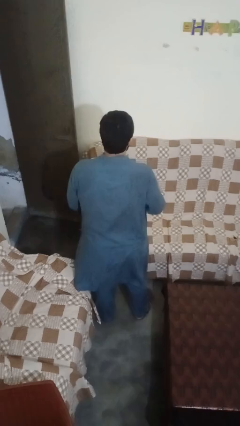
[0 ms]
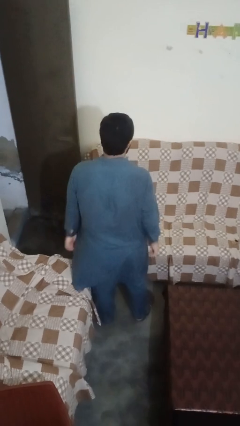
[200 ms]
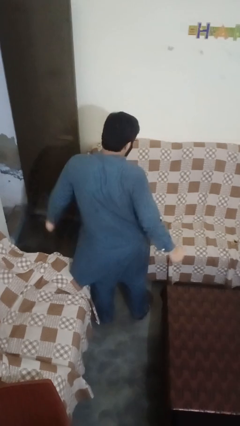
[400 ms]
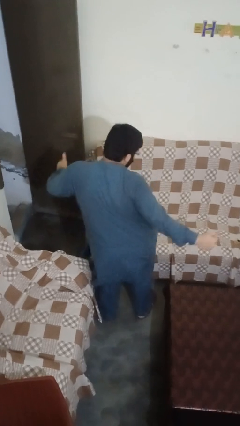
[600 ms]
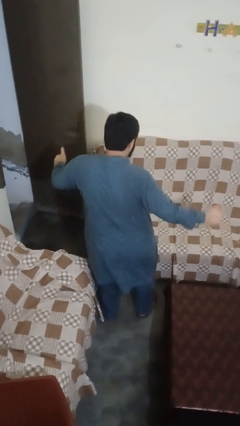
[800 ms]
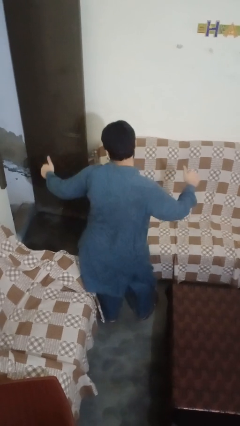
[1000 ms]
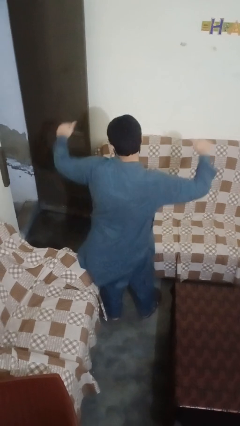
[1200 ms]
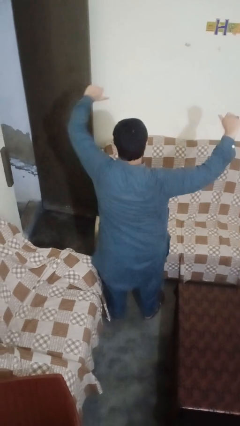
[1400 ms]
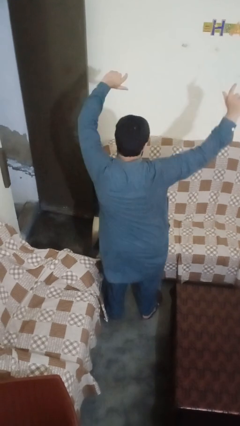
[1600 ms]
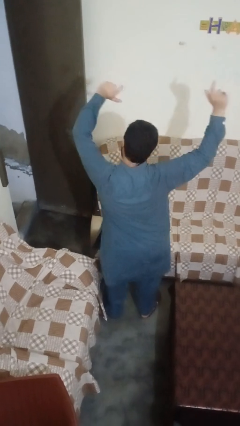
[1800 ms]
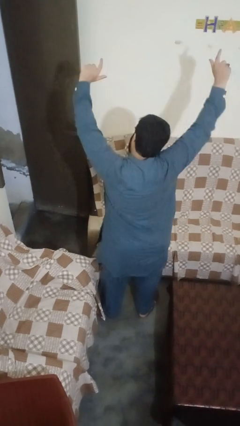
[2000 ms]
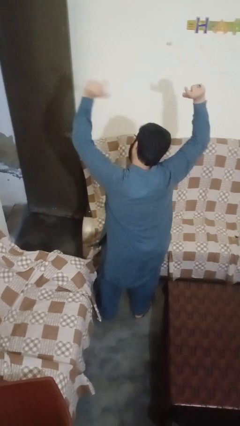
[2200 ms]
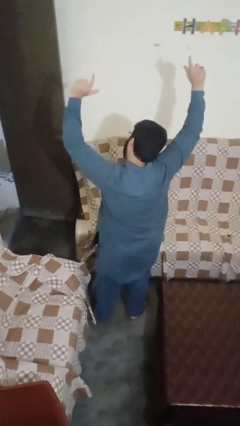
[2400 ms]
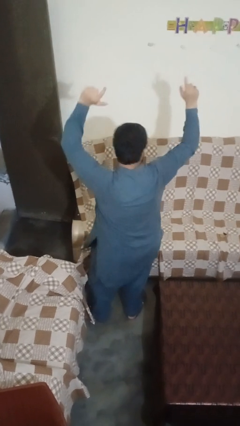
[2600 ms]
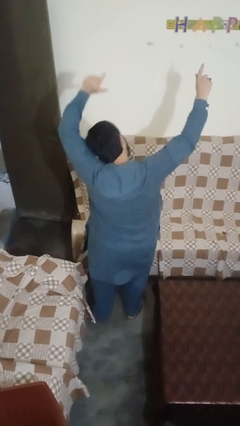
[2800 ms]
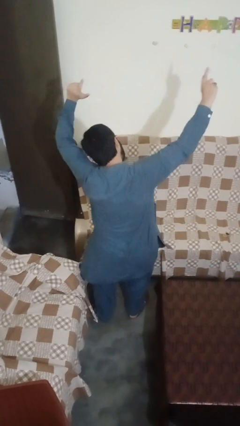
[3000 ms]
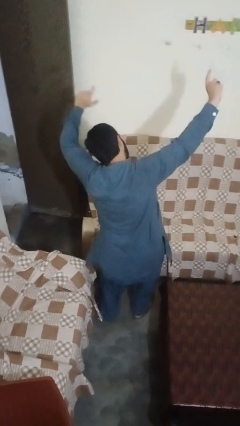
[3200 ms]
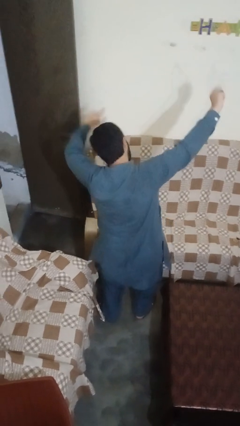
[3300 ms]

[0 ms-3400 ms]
person dances in place

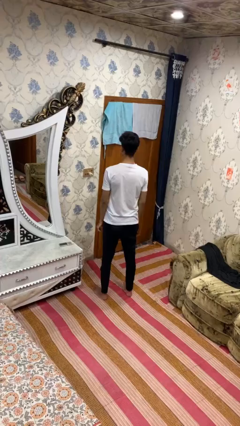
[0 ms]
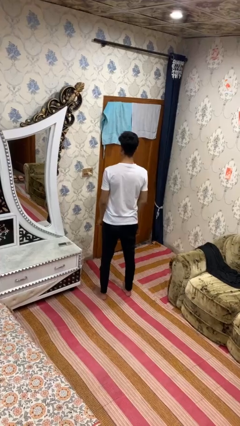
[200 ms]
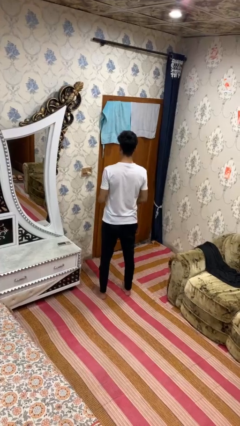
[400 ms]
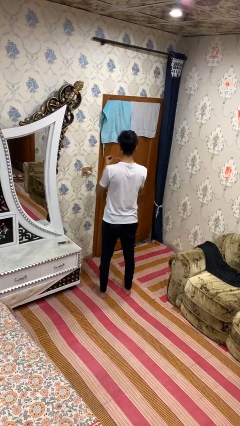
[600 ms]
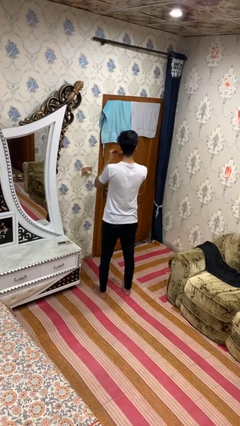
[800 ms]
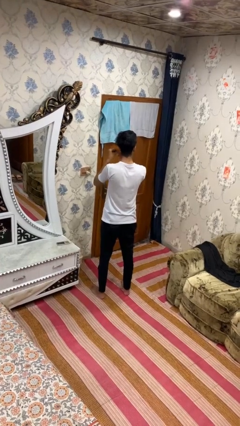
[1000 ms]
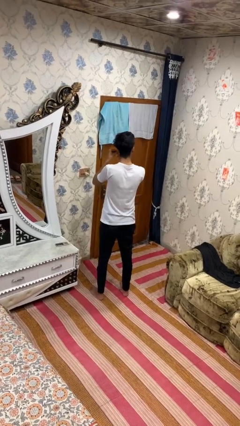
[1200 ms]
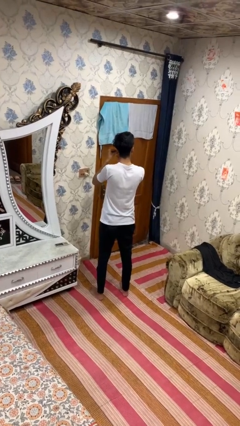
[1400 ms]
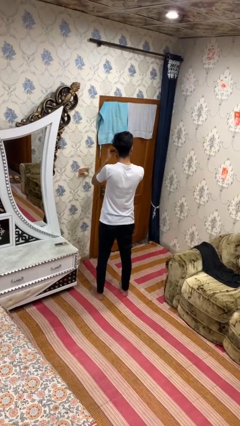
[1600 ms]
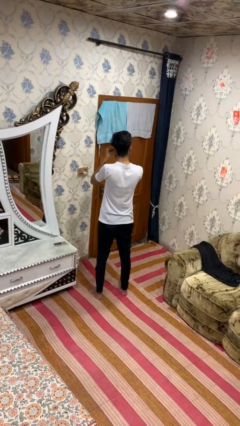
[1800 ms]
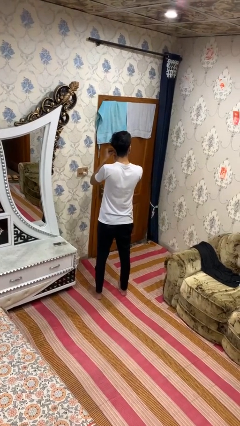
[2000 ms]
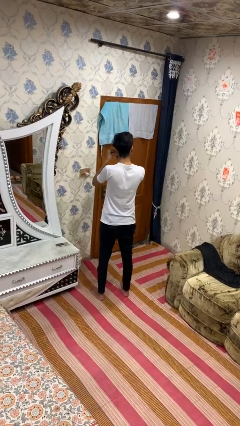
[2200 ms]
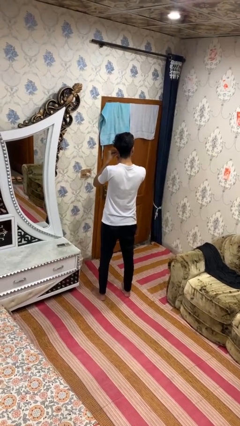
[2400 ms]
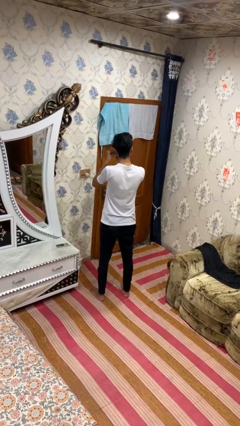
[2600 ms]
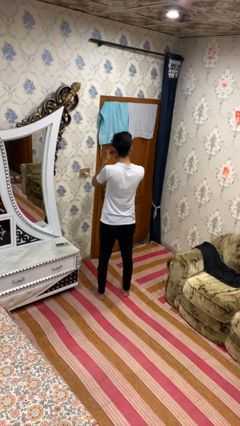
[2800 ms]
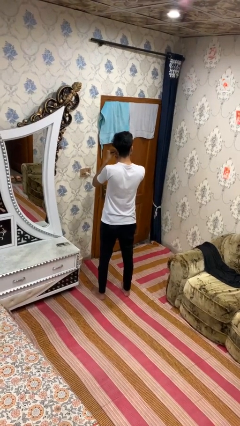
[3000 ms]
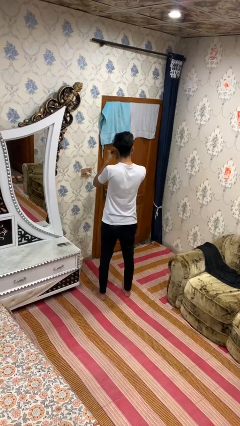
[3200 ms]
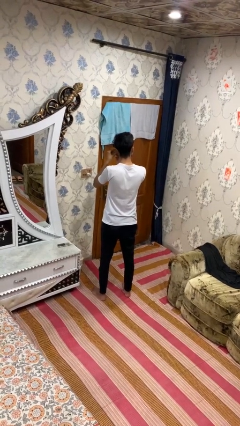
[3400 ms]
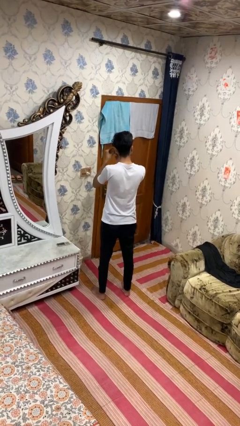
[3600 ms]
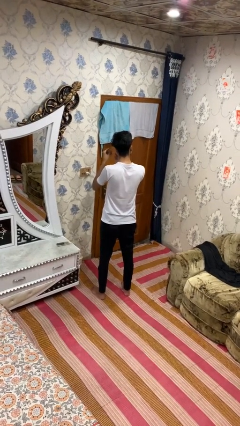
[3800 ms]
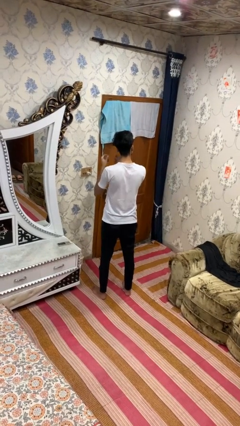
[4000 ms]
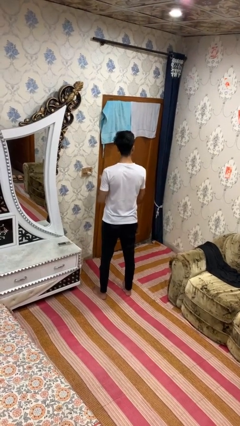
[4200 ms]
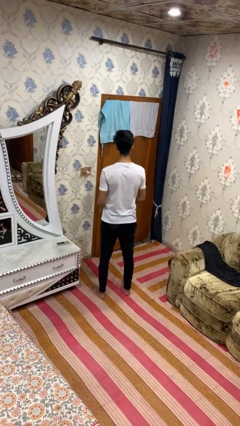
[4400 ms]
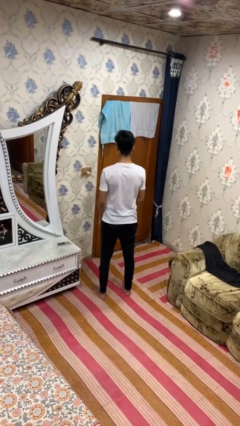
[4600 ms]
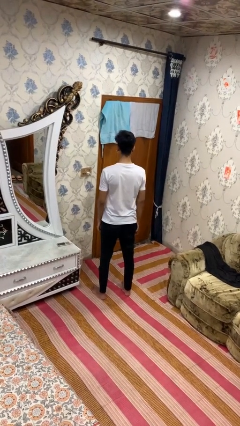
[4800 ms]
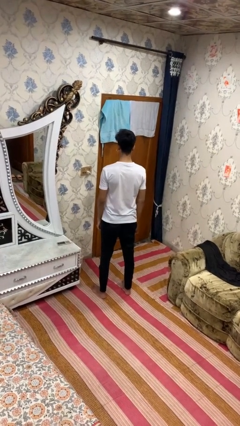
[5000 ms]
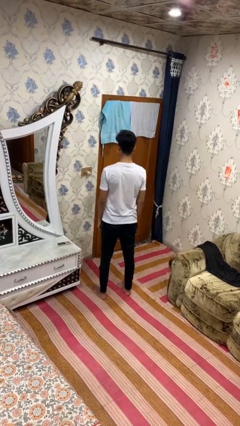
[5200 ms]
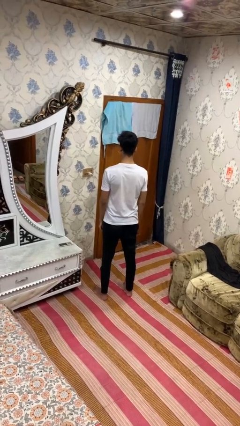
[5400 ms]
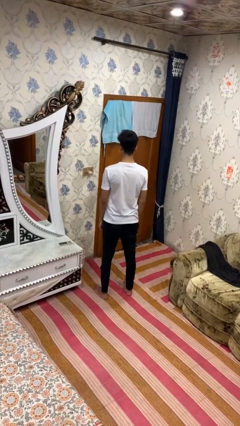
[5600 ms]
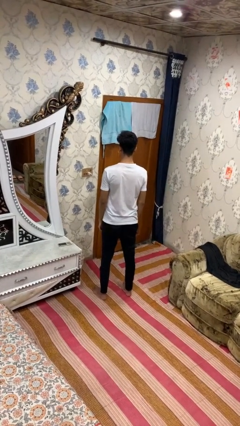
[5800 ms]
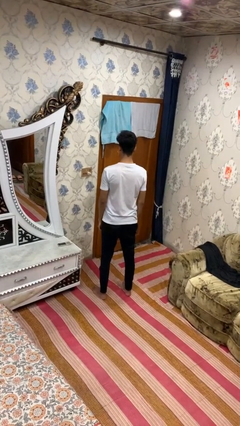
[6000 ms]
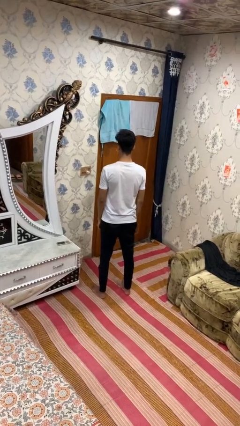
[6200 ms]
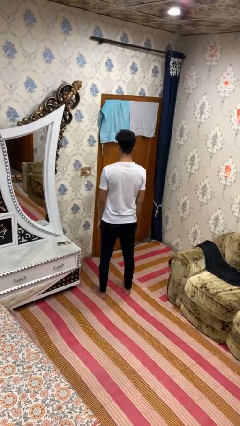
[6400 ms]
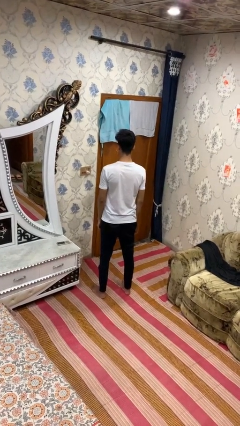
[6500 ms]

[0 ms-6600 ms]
person puts on earrings

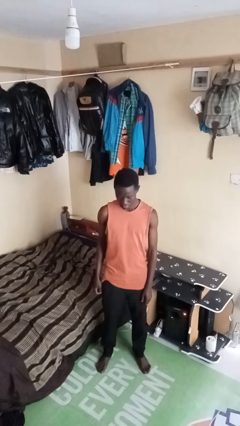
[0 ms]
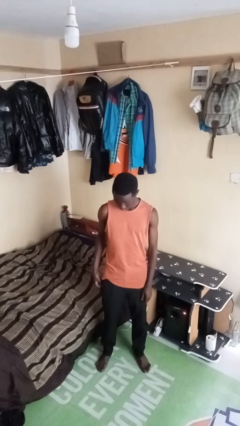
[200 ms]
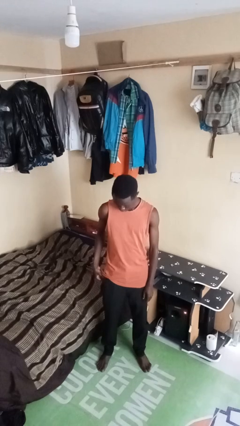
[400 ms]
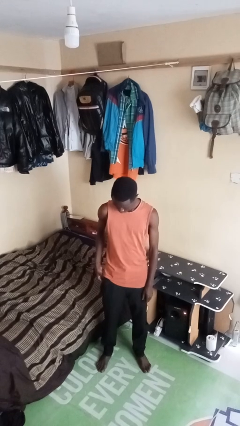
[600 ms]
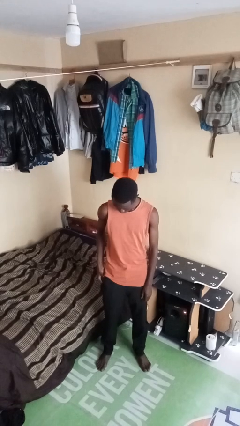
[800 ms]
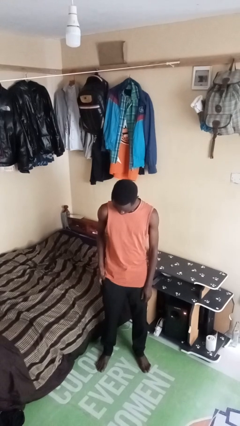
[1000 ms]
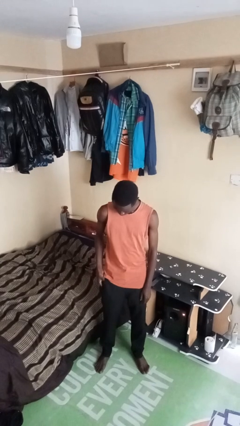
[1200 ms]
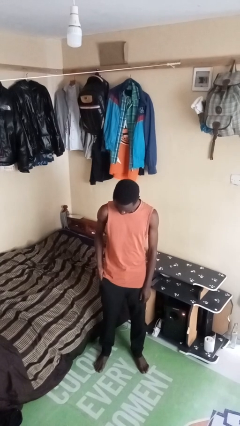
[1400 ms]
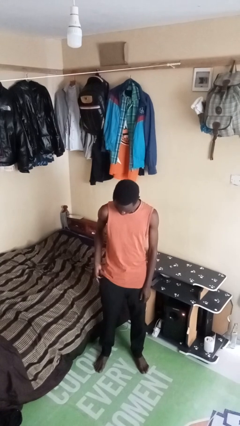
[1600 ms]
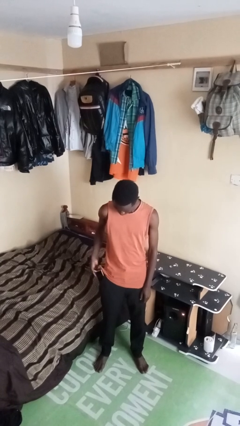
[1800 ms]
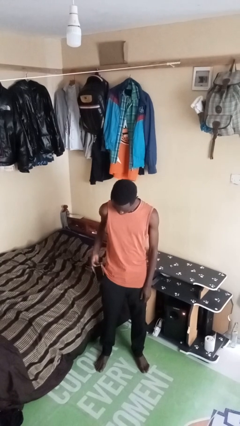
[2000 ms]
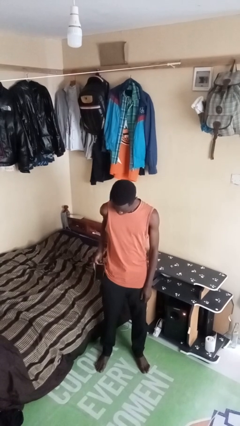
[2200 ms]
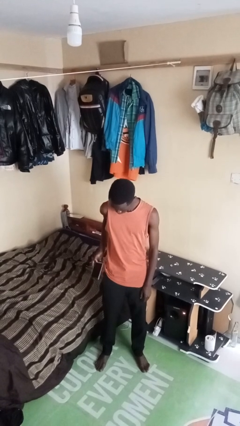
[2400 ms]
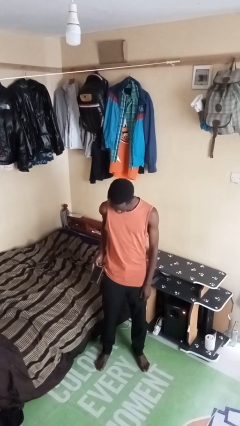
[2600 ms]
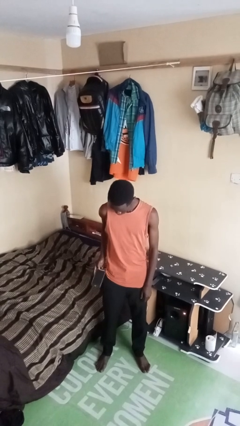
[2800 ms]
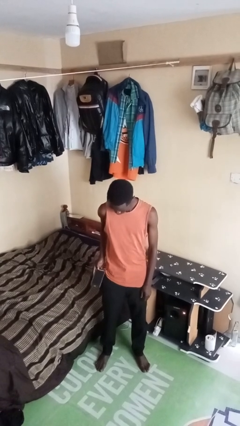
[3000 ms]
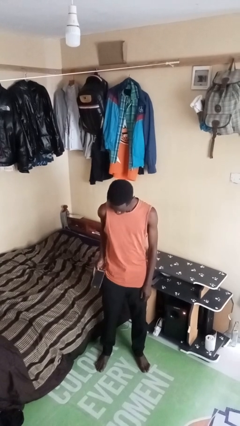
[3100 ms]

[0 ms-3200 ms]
person takes phone from pocket

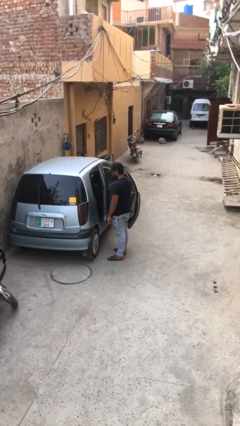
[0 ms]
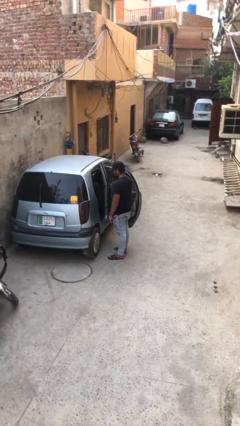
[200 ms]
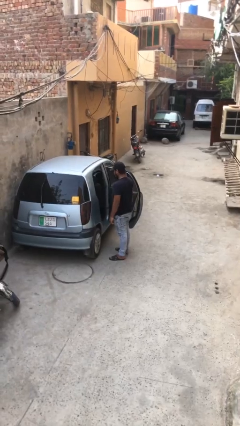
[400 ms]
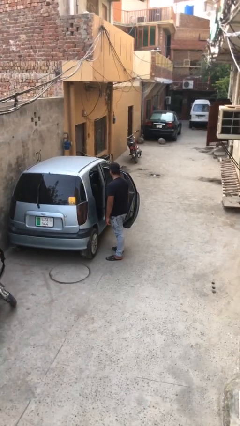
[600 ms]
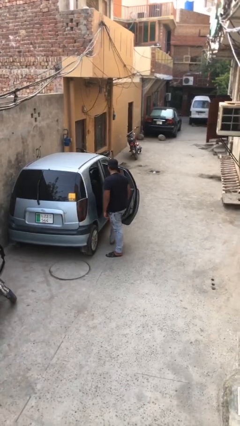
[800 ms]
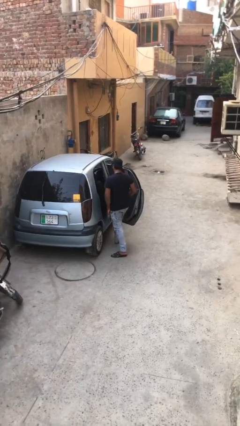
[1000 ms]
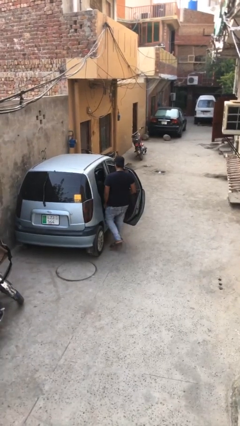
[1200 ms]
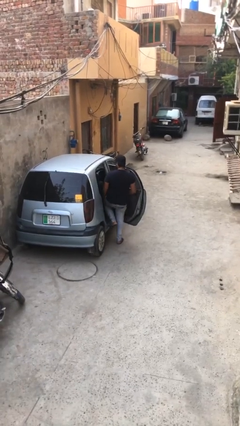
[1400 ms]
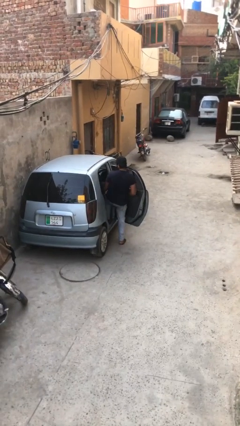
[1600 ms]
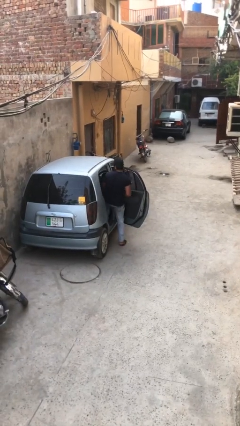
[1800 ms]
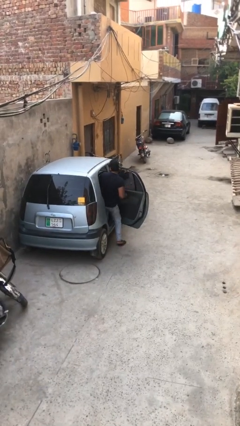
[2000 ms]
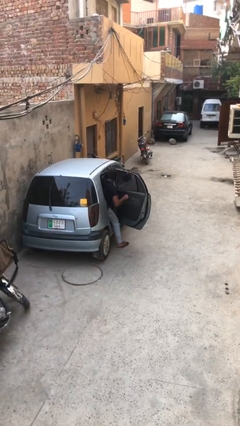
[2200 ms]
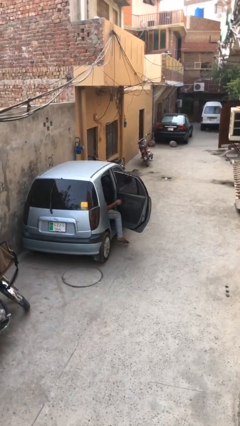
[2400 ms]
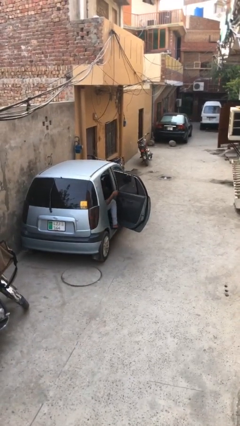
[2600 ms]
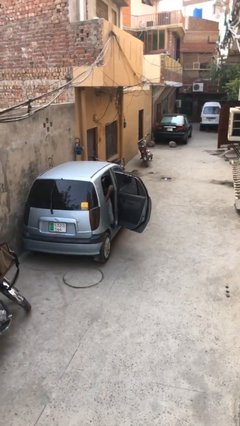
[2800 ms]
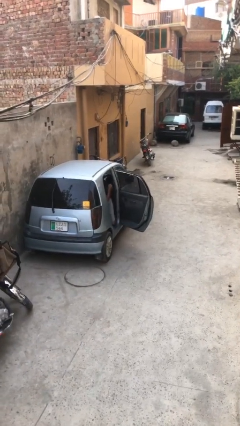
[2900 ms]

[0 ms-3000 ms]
person enters car

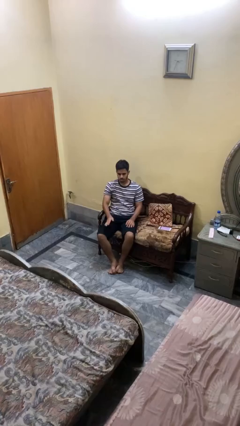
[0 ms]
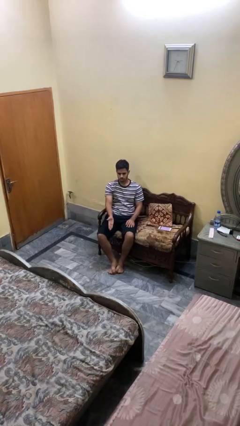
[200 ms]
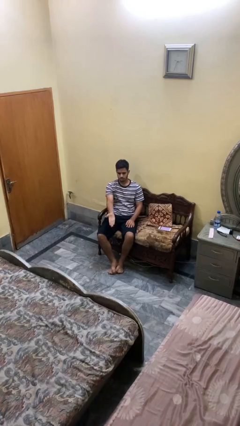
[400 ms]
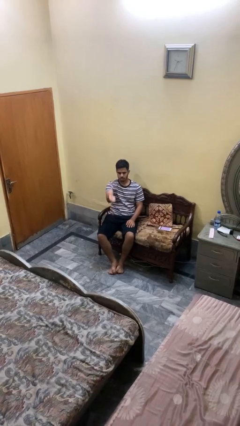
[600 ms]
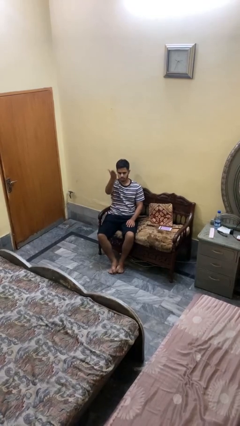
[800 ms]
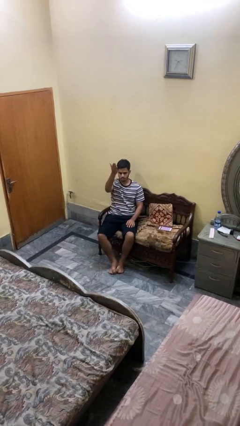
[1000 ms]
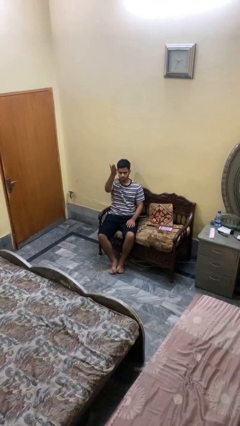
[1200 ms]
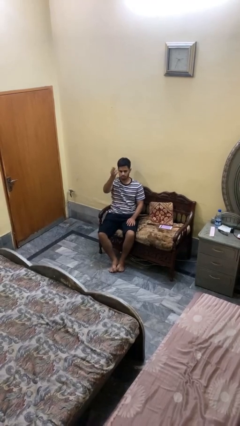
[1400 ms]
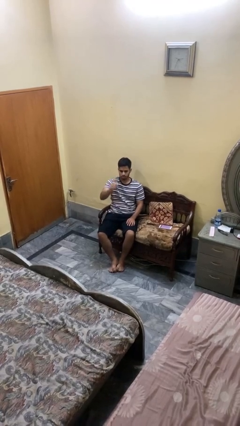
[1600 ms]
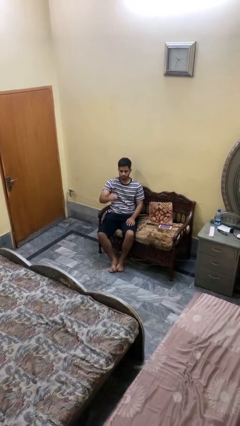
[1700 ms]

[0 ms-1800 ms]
person gestures swipe up
